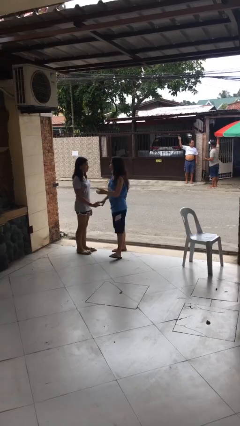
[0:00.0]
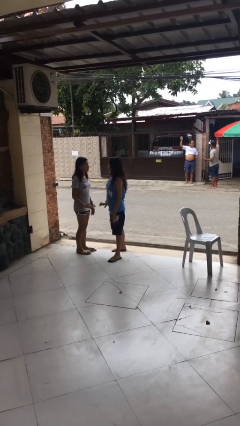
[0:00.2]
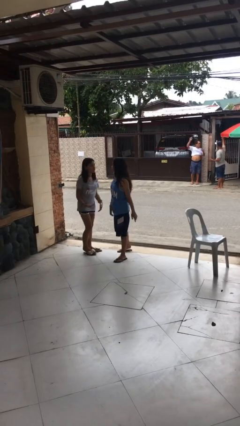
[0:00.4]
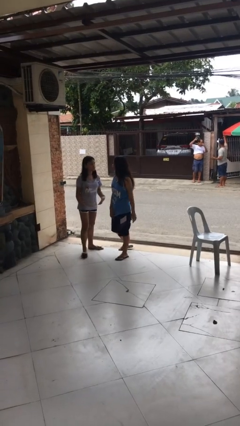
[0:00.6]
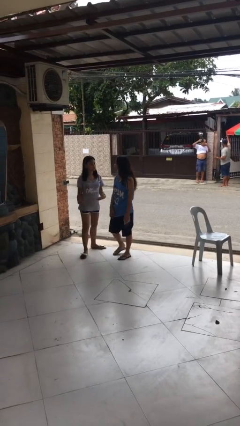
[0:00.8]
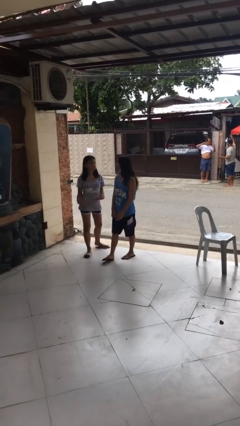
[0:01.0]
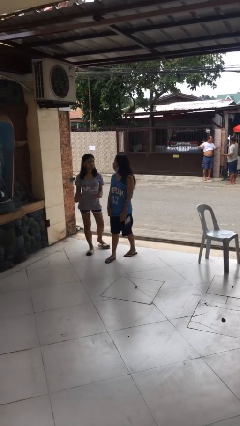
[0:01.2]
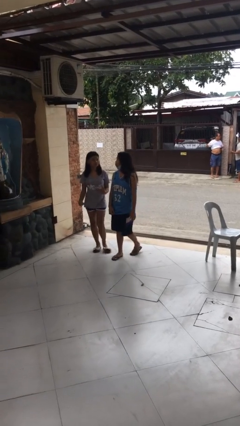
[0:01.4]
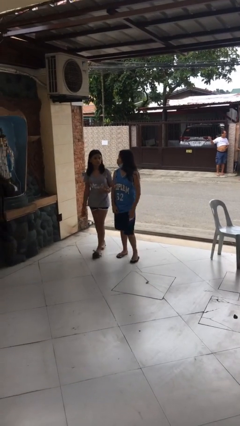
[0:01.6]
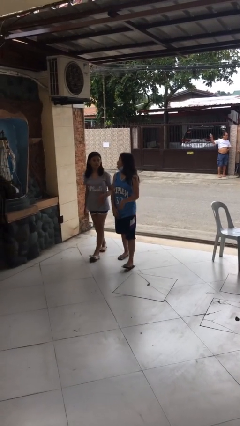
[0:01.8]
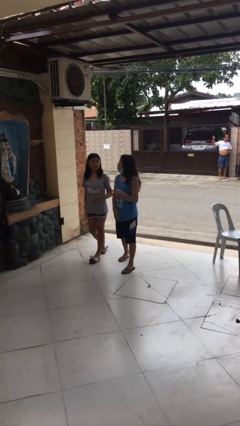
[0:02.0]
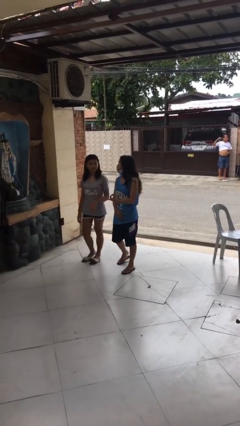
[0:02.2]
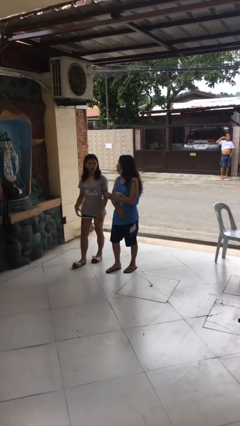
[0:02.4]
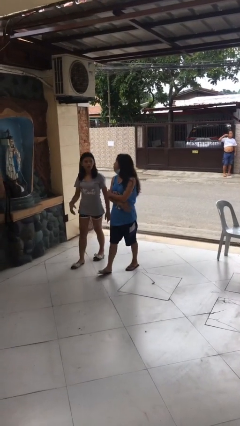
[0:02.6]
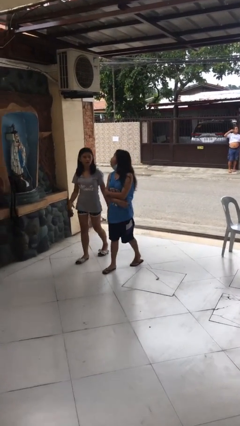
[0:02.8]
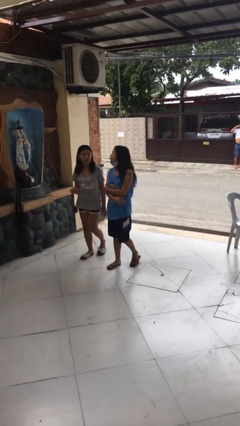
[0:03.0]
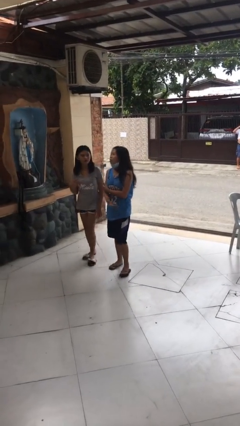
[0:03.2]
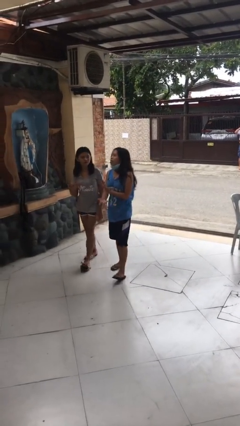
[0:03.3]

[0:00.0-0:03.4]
person talks to person

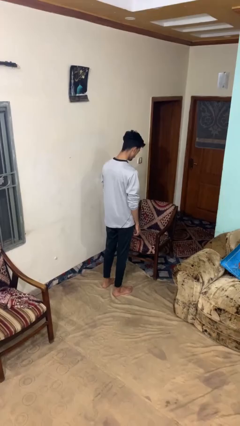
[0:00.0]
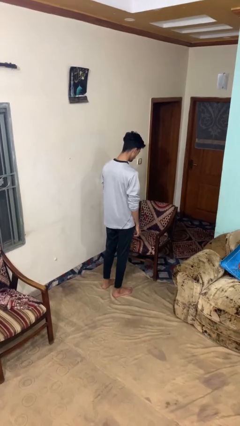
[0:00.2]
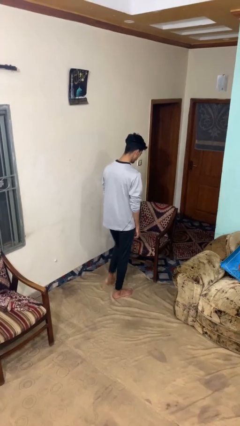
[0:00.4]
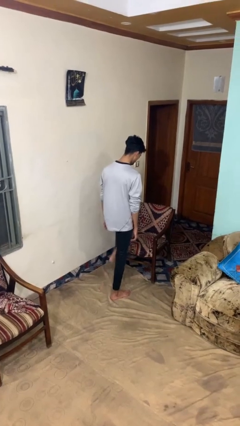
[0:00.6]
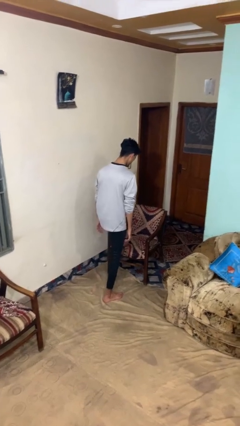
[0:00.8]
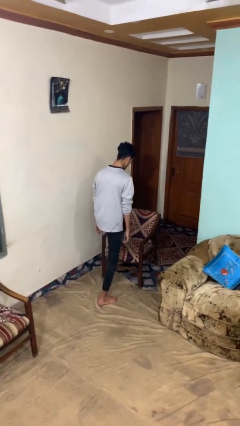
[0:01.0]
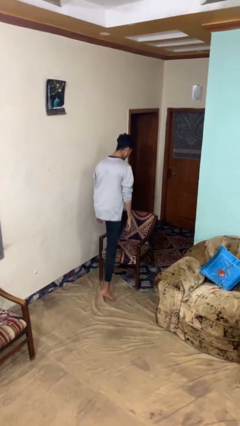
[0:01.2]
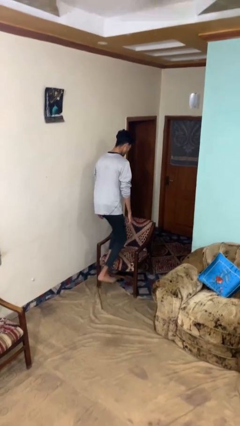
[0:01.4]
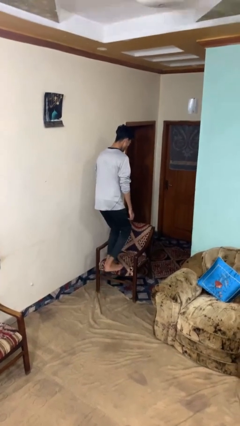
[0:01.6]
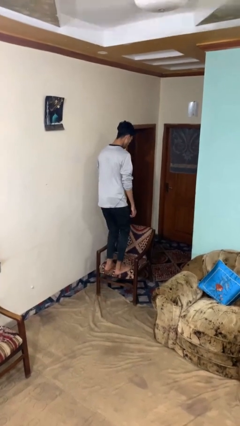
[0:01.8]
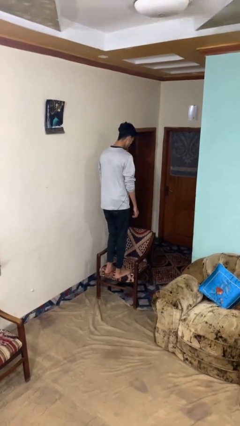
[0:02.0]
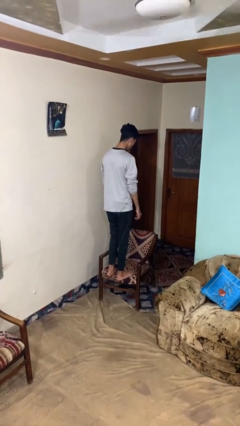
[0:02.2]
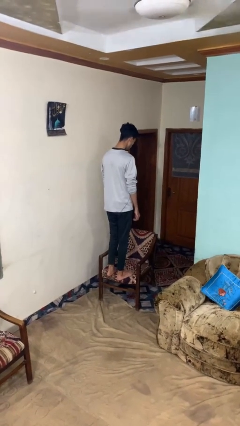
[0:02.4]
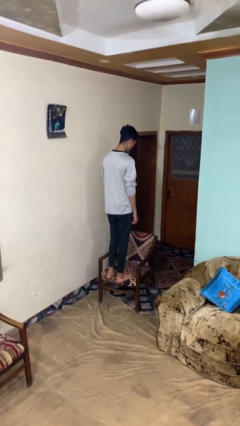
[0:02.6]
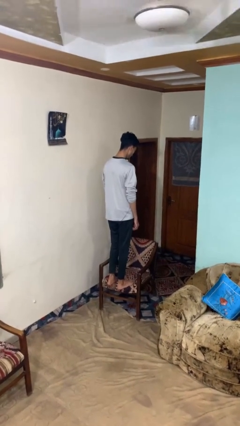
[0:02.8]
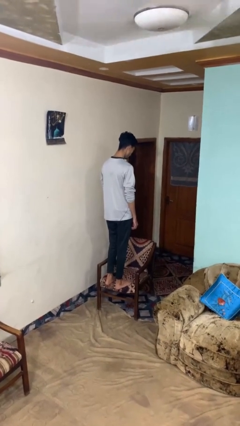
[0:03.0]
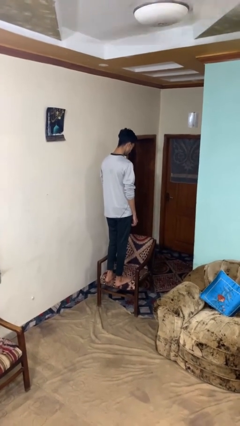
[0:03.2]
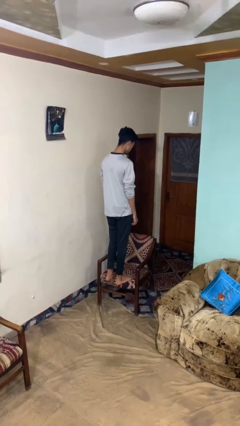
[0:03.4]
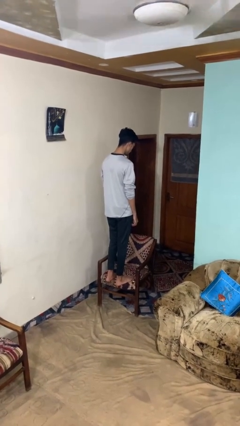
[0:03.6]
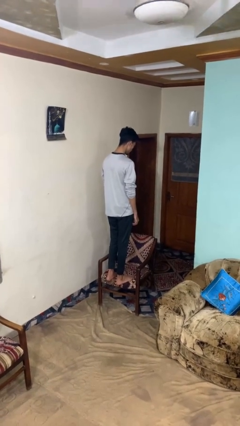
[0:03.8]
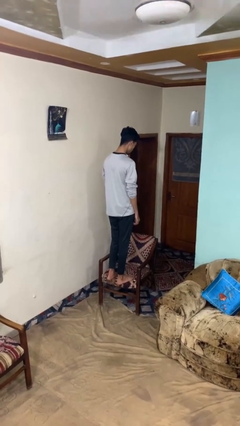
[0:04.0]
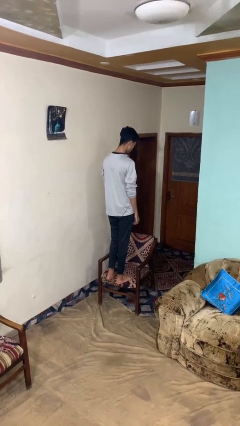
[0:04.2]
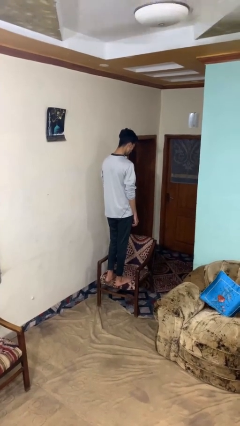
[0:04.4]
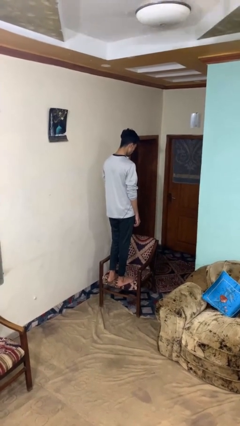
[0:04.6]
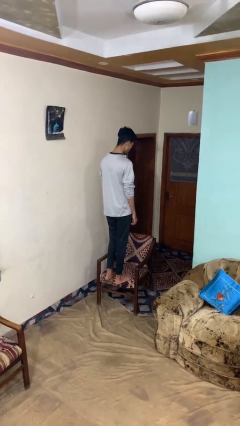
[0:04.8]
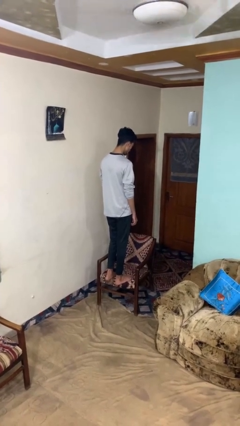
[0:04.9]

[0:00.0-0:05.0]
person climbs on chair

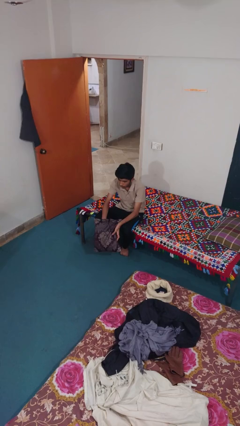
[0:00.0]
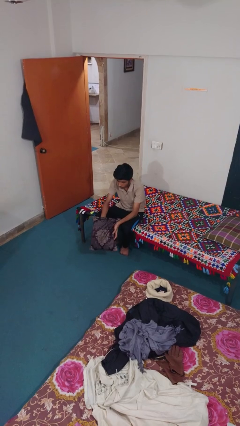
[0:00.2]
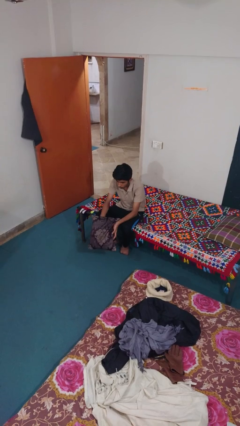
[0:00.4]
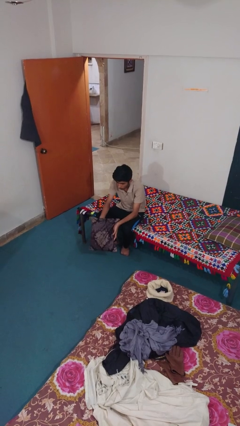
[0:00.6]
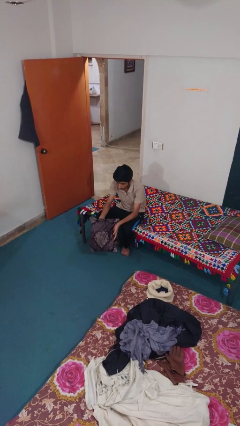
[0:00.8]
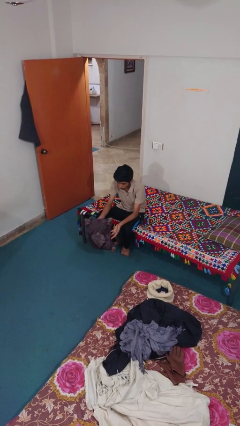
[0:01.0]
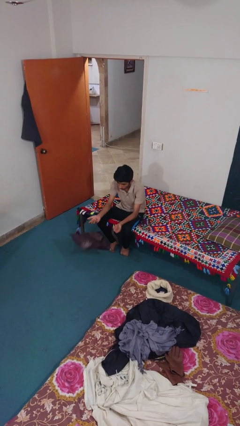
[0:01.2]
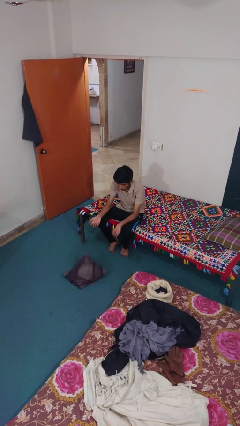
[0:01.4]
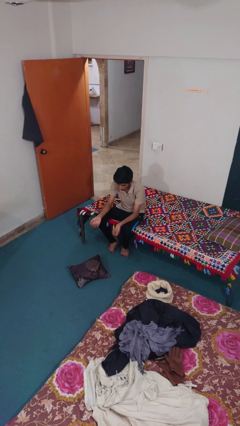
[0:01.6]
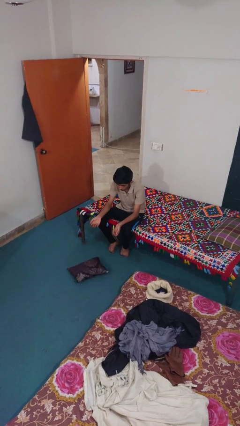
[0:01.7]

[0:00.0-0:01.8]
person drops object

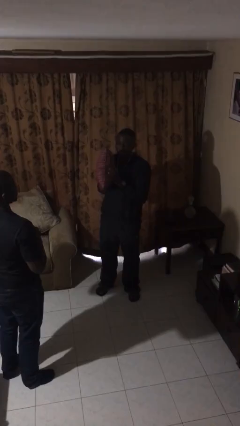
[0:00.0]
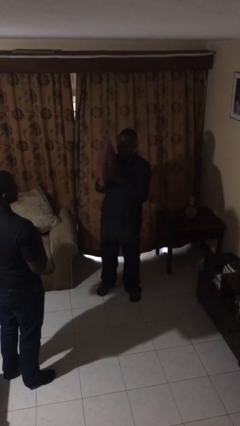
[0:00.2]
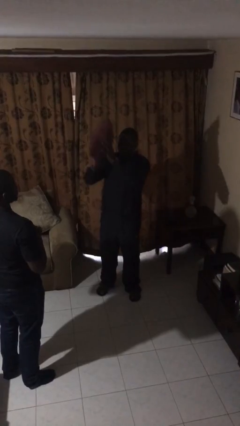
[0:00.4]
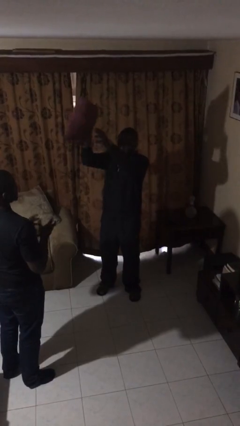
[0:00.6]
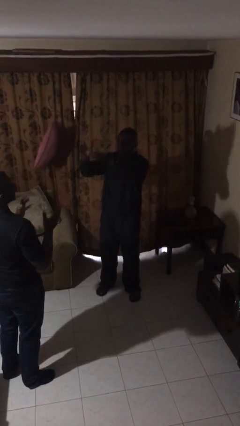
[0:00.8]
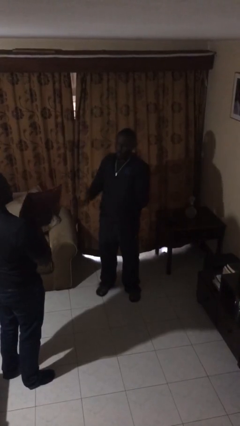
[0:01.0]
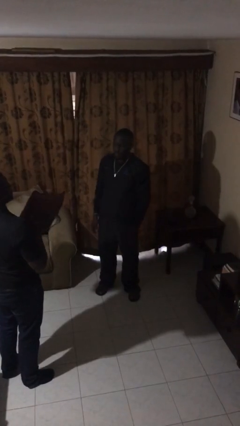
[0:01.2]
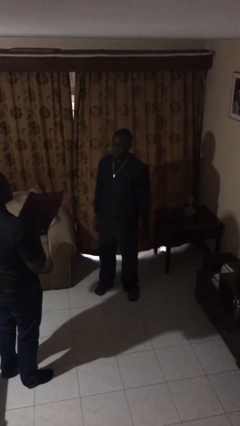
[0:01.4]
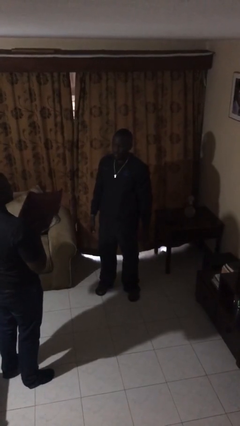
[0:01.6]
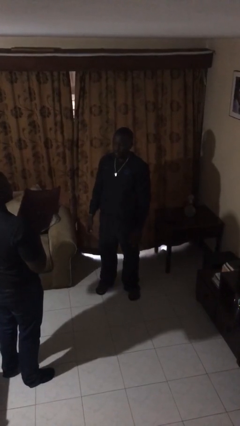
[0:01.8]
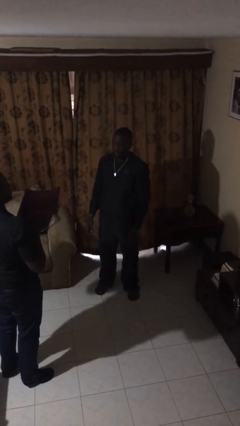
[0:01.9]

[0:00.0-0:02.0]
person throws object to person

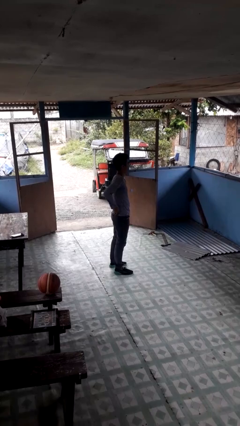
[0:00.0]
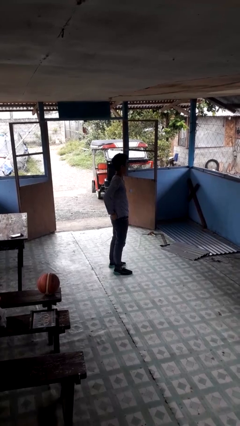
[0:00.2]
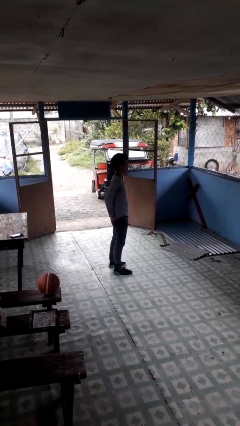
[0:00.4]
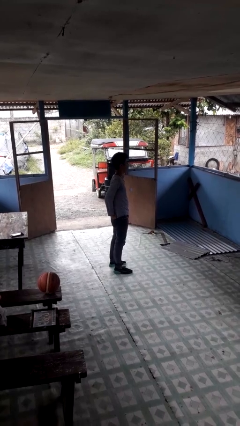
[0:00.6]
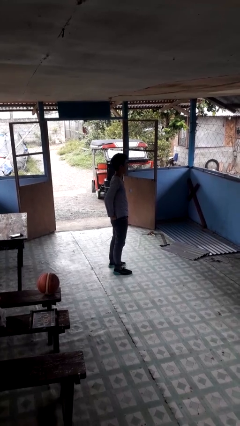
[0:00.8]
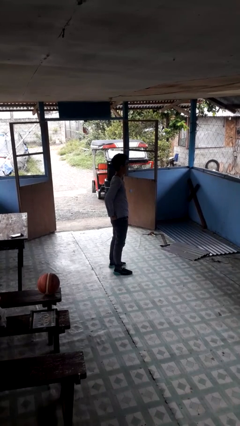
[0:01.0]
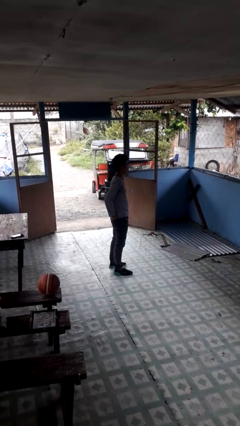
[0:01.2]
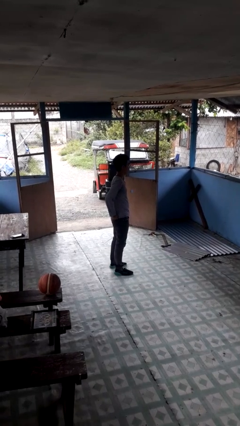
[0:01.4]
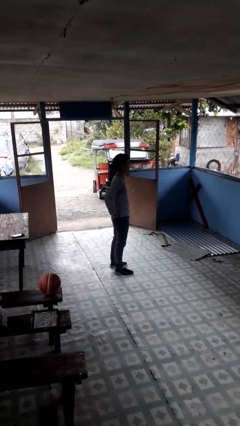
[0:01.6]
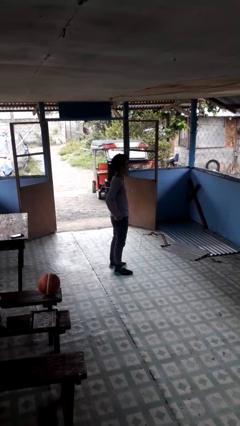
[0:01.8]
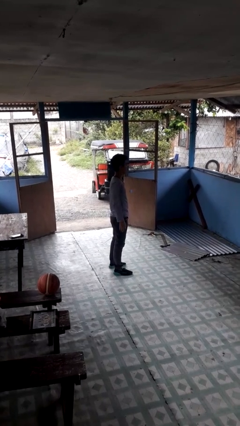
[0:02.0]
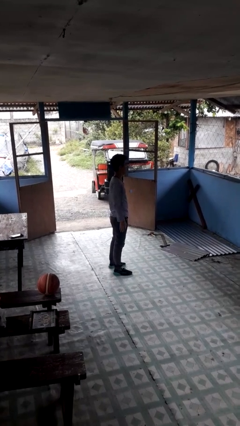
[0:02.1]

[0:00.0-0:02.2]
person puts hands in back pockets

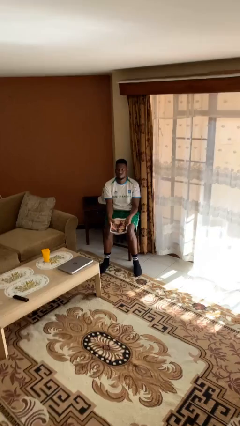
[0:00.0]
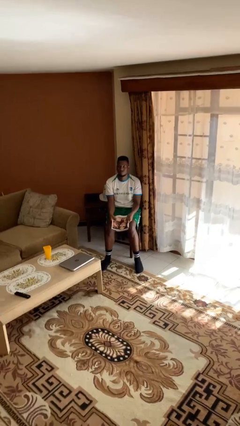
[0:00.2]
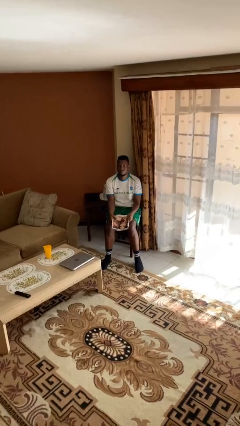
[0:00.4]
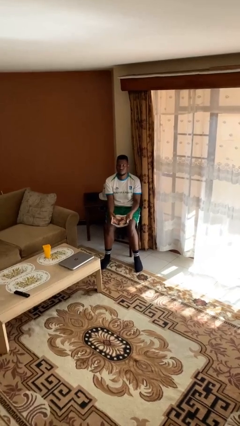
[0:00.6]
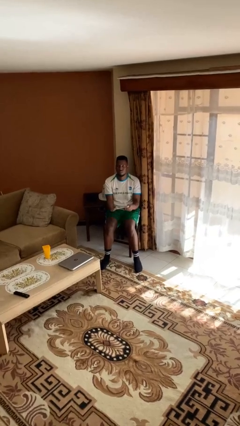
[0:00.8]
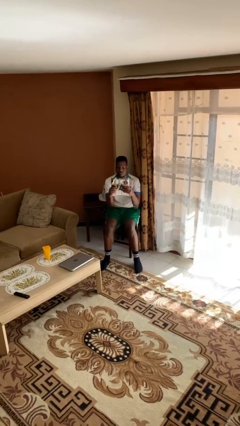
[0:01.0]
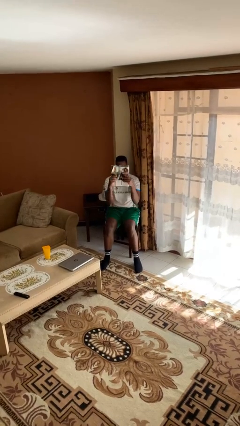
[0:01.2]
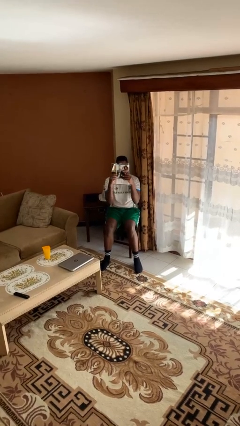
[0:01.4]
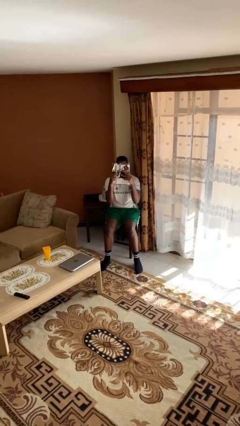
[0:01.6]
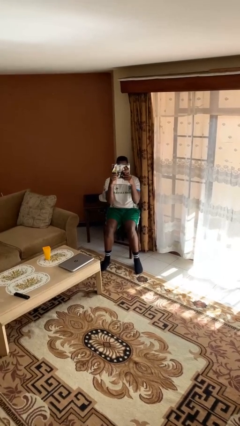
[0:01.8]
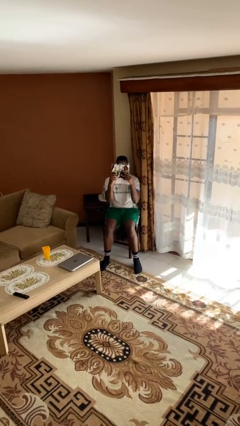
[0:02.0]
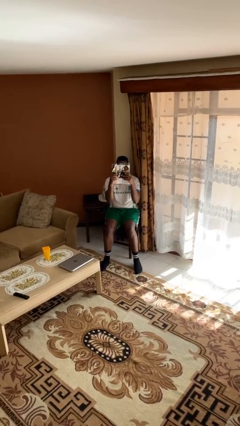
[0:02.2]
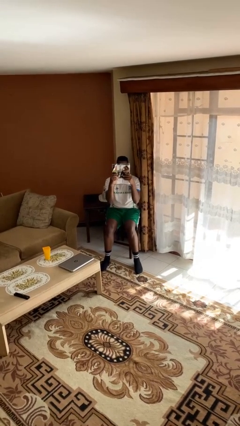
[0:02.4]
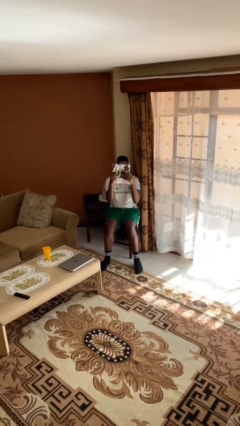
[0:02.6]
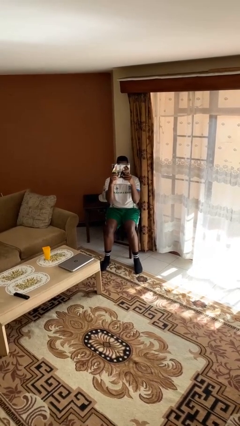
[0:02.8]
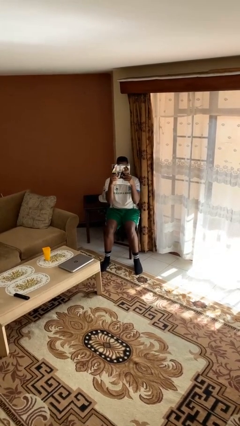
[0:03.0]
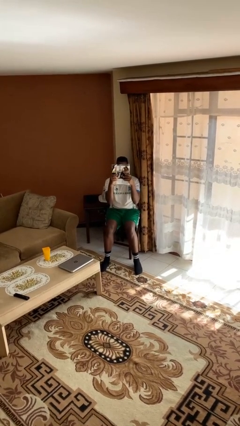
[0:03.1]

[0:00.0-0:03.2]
person reads document
